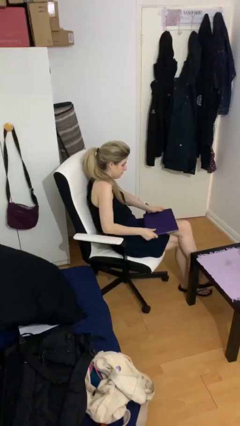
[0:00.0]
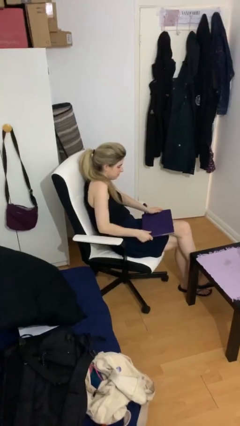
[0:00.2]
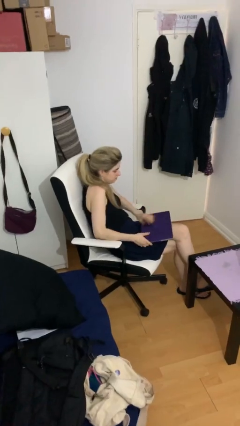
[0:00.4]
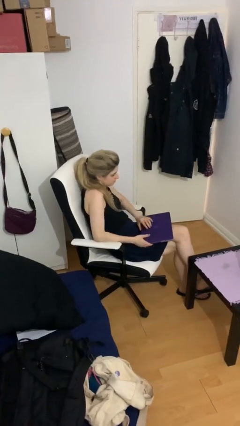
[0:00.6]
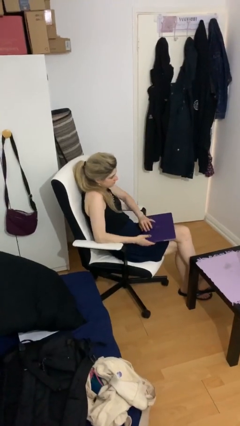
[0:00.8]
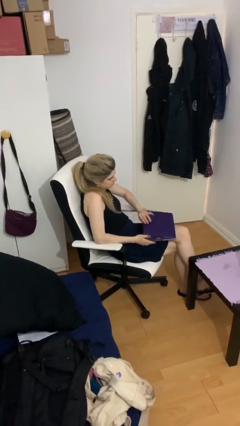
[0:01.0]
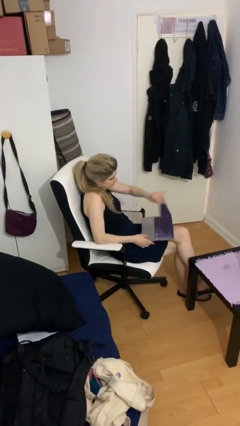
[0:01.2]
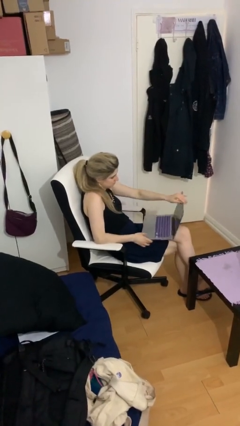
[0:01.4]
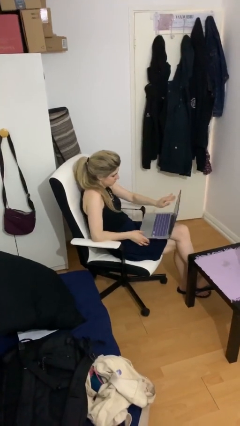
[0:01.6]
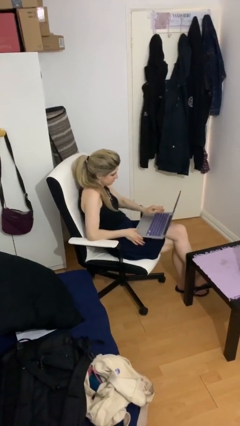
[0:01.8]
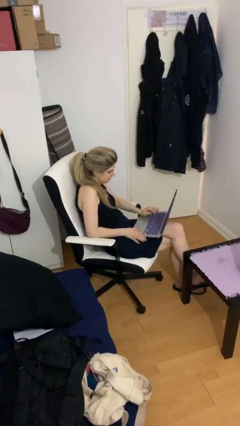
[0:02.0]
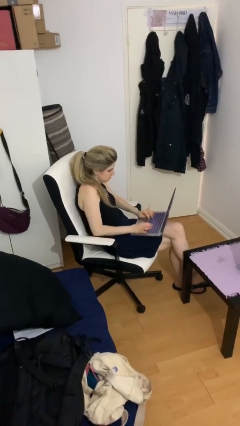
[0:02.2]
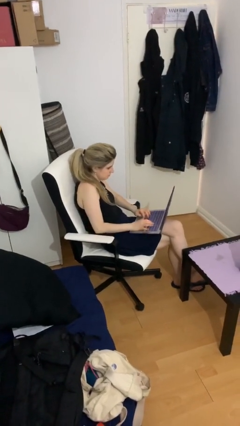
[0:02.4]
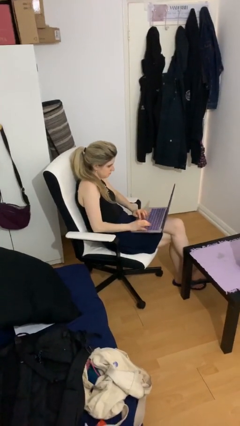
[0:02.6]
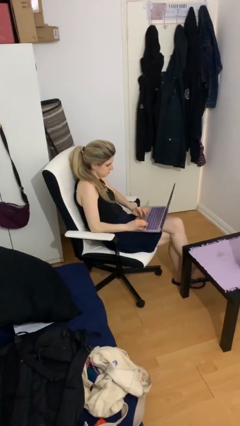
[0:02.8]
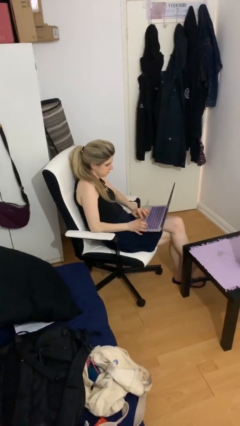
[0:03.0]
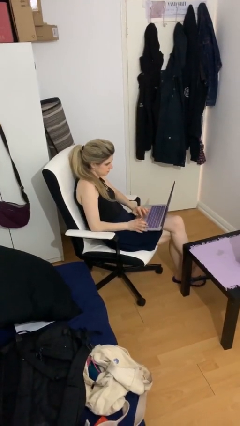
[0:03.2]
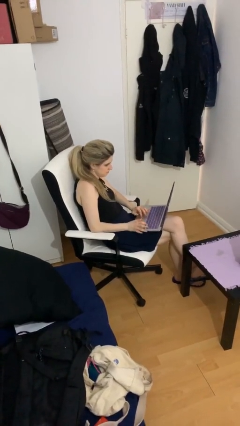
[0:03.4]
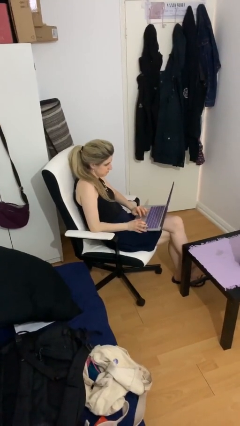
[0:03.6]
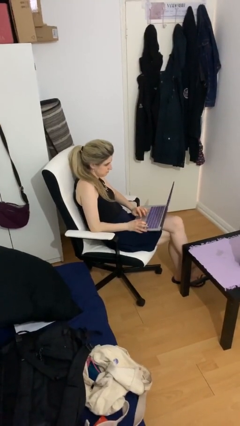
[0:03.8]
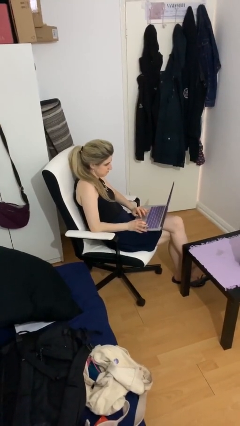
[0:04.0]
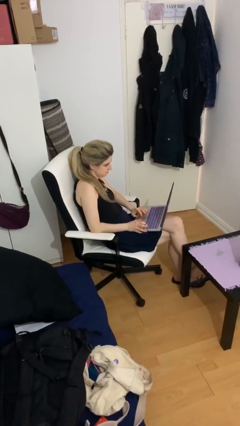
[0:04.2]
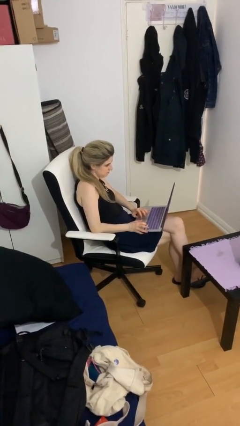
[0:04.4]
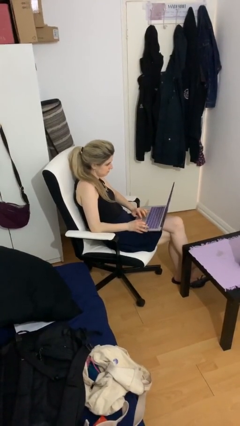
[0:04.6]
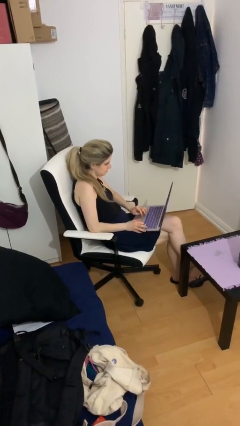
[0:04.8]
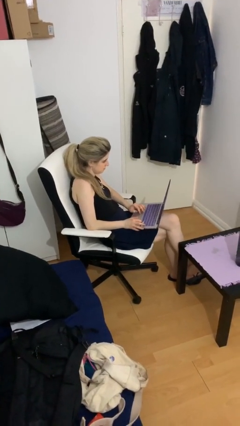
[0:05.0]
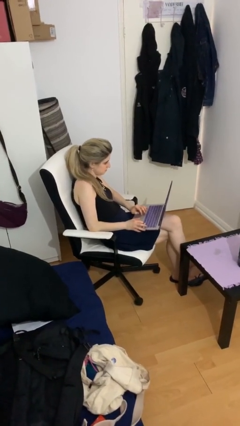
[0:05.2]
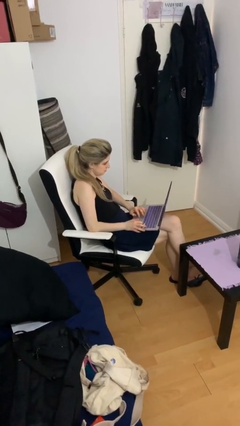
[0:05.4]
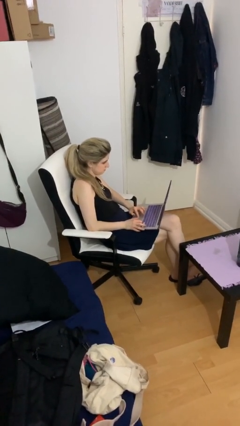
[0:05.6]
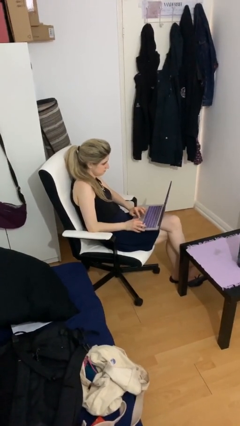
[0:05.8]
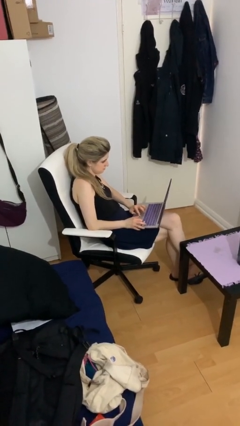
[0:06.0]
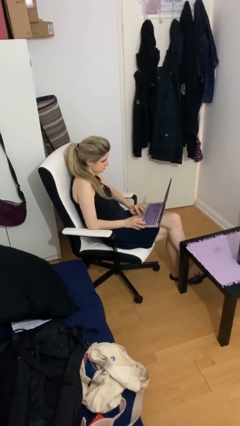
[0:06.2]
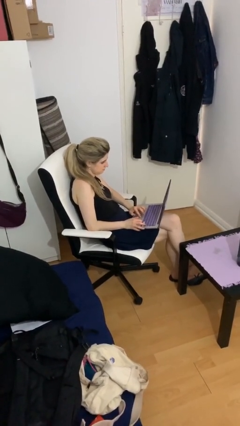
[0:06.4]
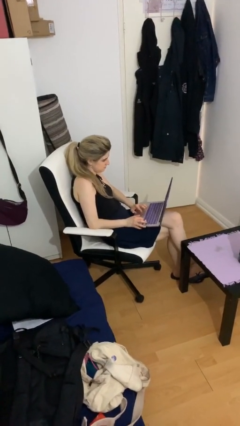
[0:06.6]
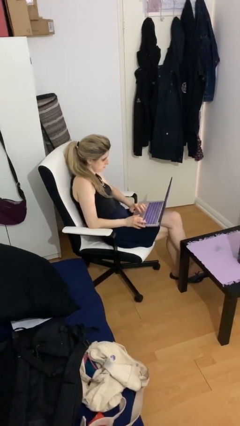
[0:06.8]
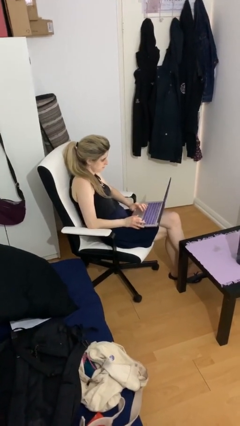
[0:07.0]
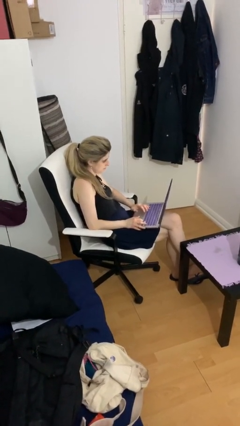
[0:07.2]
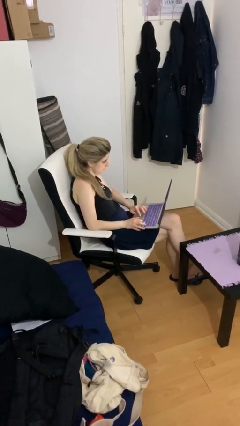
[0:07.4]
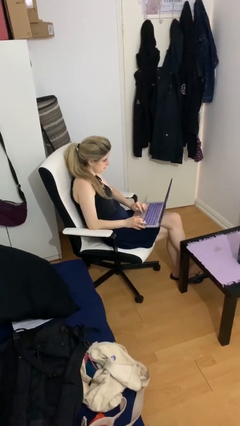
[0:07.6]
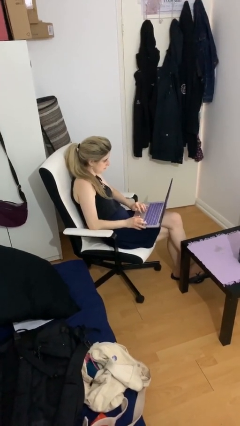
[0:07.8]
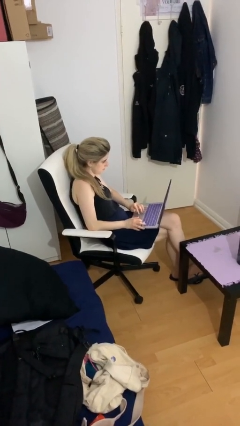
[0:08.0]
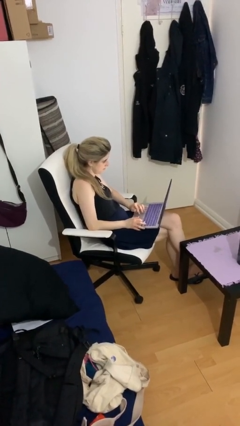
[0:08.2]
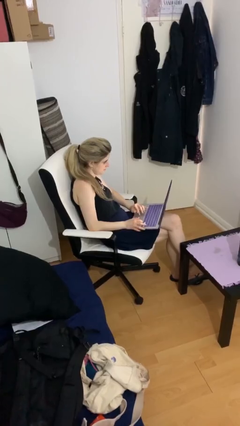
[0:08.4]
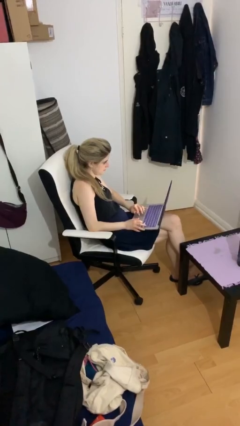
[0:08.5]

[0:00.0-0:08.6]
person interacts with laptop

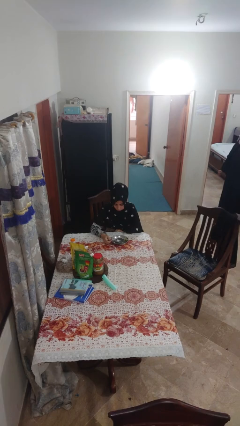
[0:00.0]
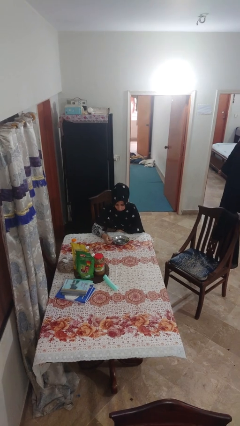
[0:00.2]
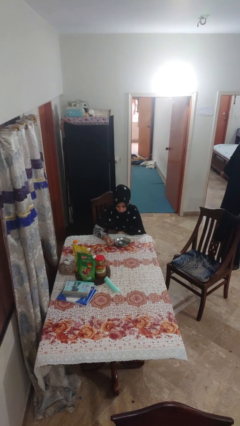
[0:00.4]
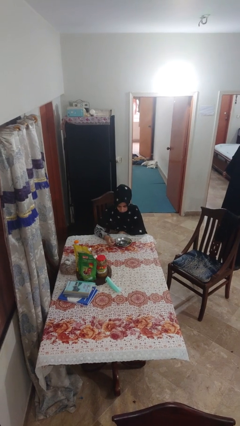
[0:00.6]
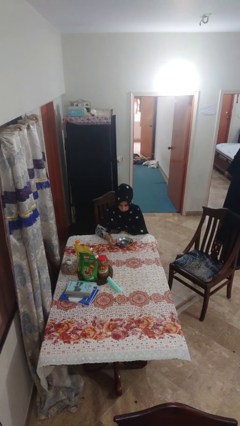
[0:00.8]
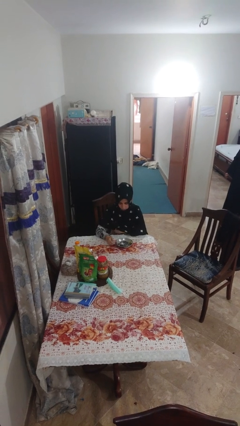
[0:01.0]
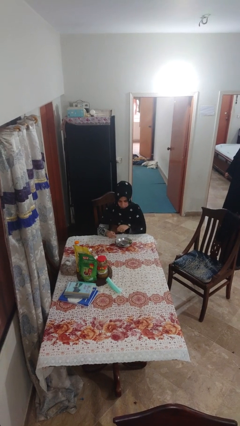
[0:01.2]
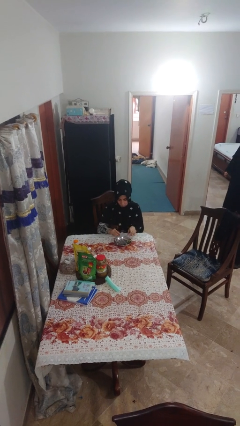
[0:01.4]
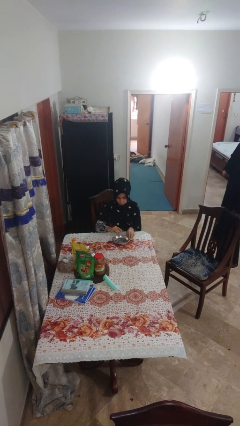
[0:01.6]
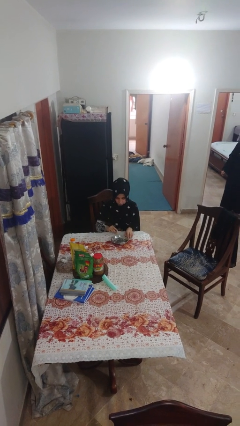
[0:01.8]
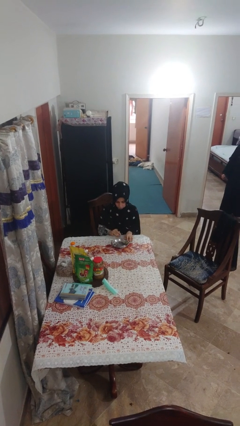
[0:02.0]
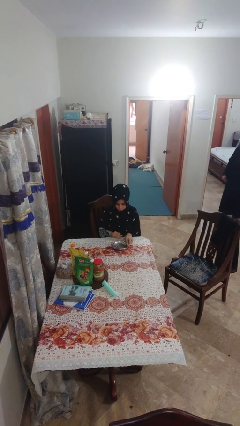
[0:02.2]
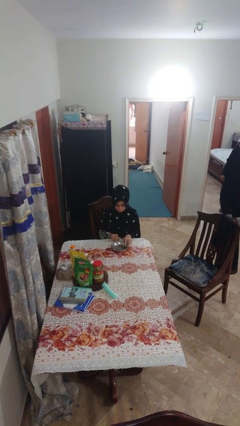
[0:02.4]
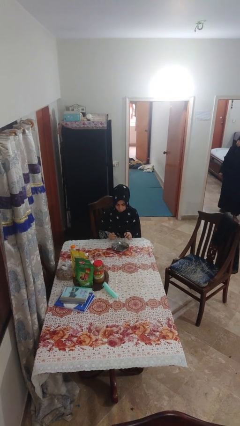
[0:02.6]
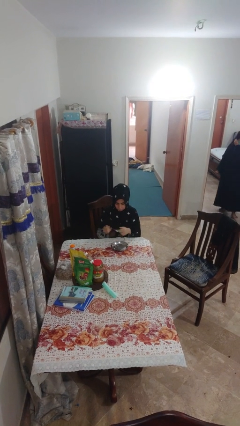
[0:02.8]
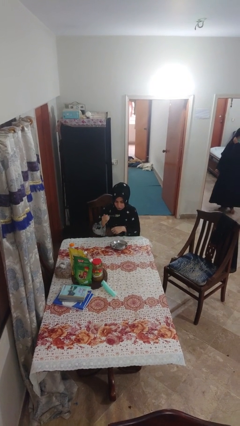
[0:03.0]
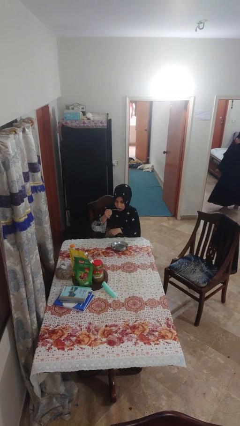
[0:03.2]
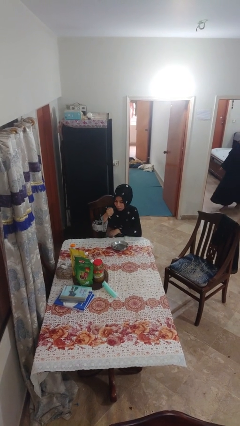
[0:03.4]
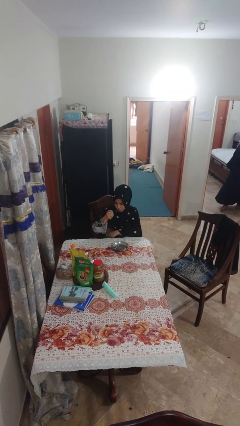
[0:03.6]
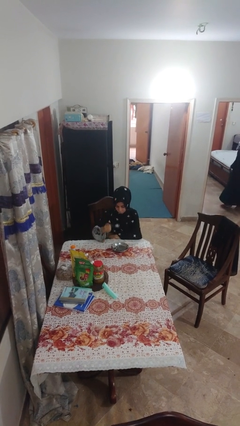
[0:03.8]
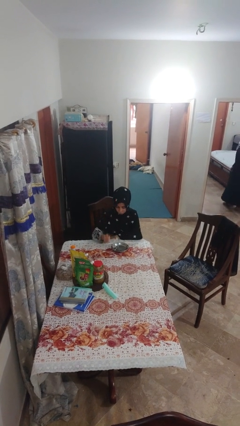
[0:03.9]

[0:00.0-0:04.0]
person eats with utensil

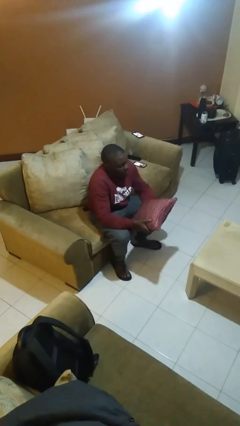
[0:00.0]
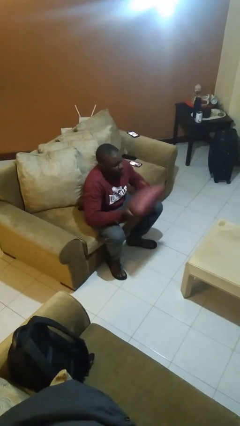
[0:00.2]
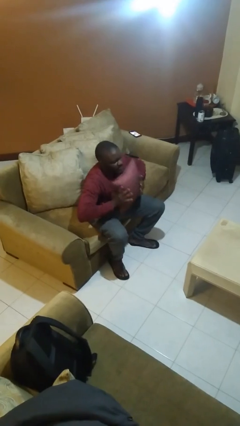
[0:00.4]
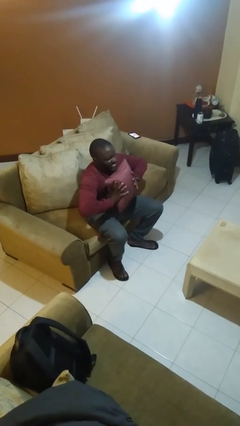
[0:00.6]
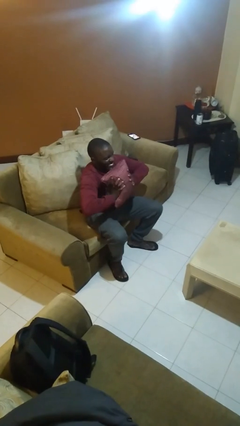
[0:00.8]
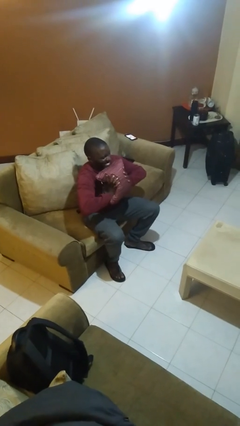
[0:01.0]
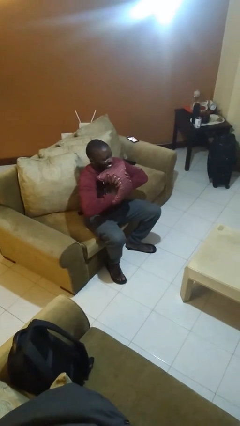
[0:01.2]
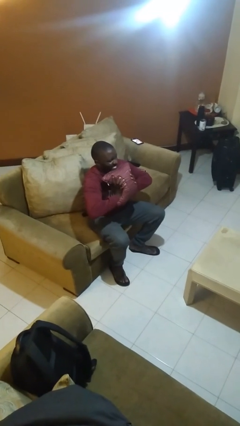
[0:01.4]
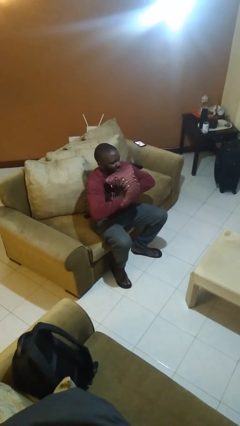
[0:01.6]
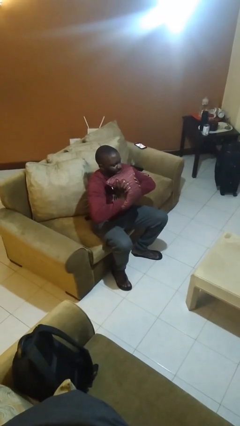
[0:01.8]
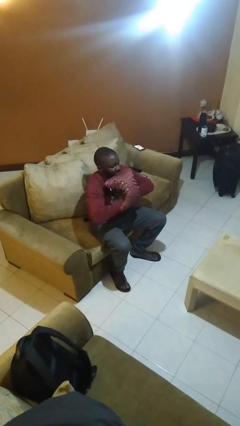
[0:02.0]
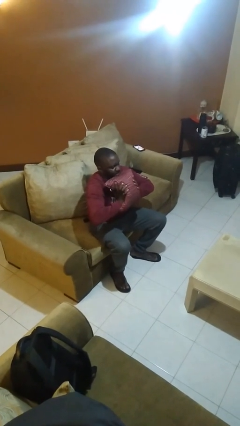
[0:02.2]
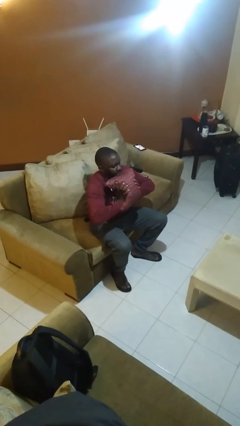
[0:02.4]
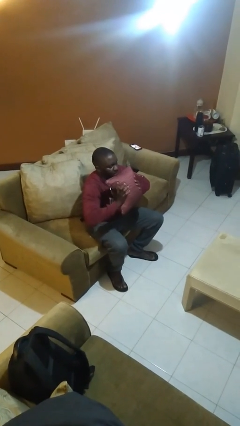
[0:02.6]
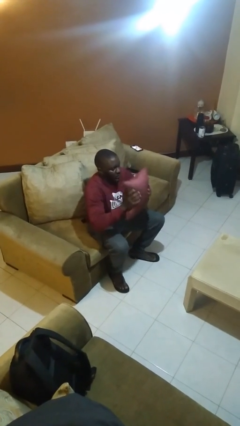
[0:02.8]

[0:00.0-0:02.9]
person squeezes object

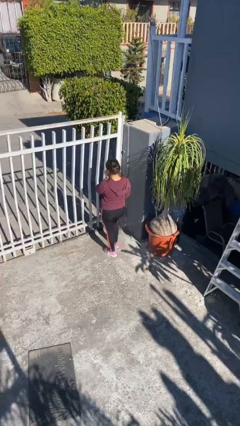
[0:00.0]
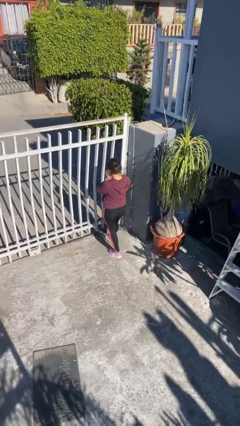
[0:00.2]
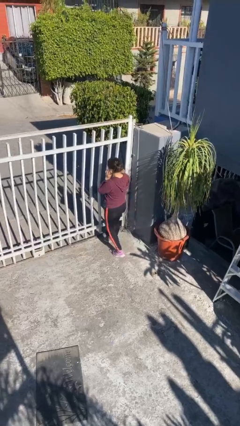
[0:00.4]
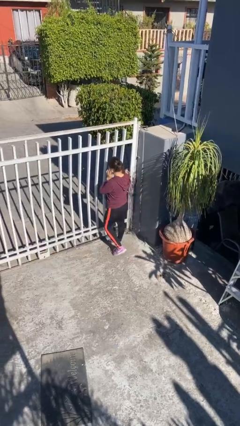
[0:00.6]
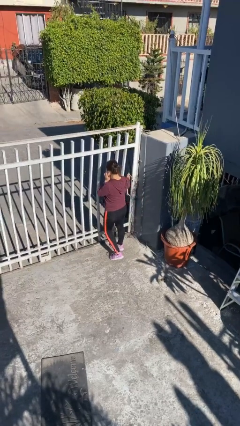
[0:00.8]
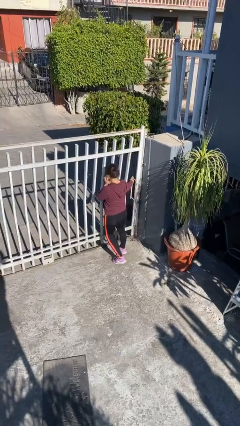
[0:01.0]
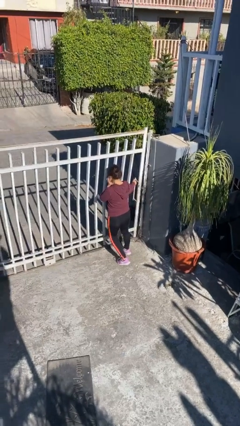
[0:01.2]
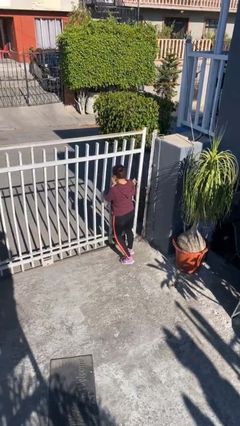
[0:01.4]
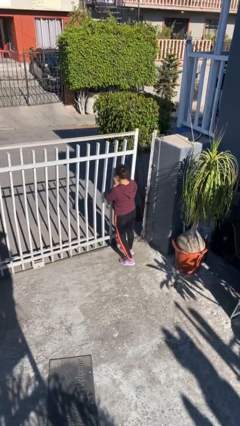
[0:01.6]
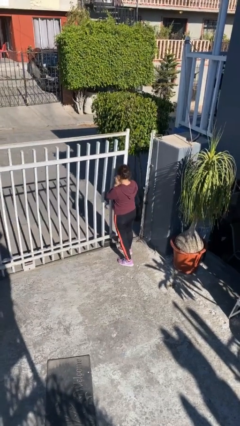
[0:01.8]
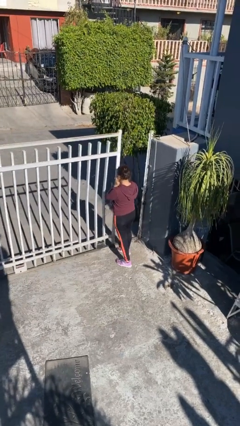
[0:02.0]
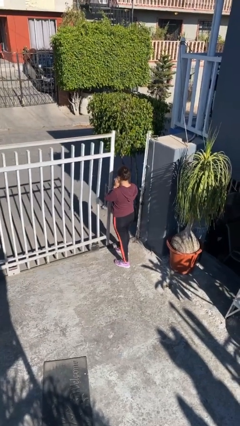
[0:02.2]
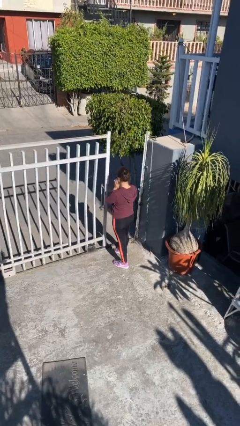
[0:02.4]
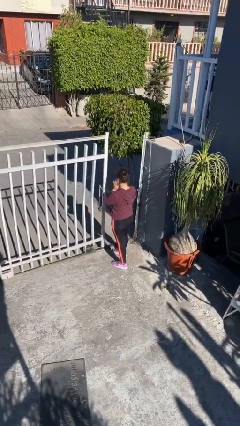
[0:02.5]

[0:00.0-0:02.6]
person opens facility door
